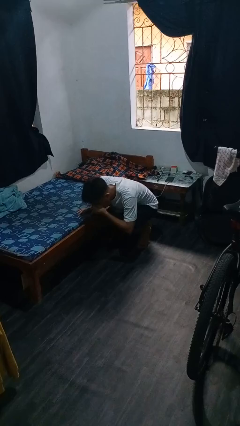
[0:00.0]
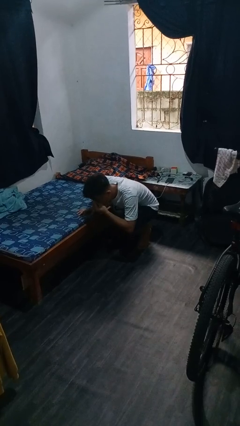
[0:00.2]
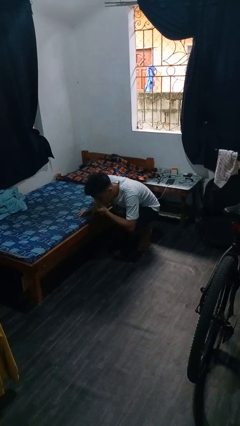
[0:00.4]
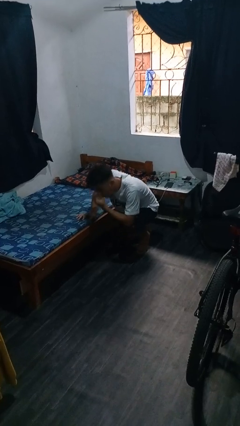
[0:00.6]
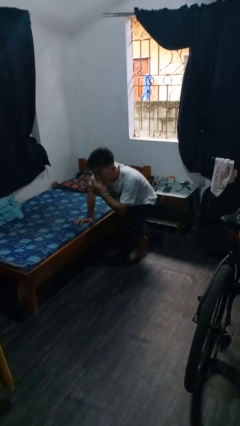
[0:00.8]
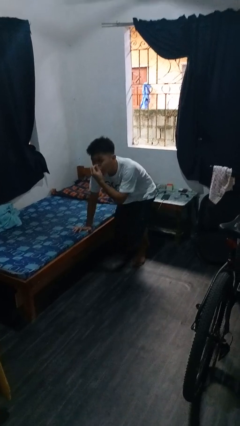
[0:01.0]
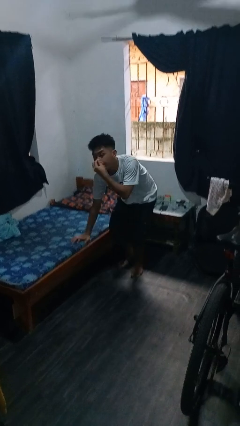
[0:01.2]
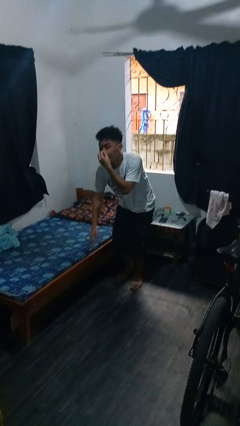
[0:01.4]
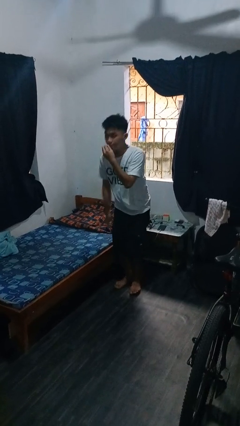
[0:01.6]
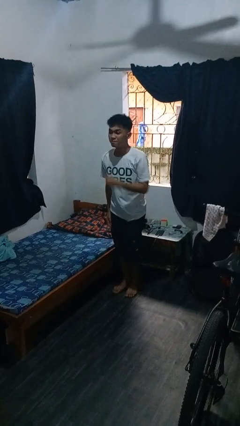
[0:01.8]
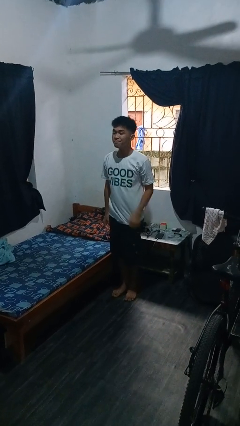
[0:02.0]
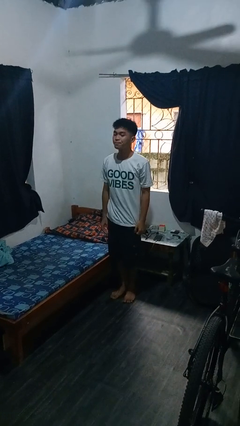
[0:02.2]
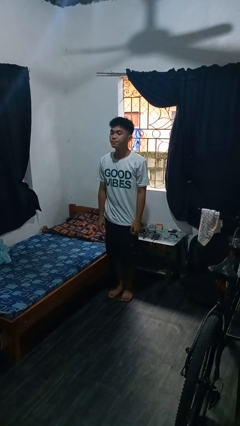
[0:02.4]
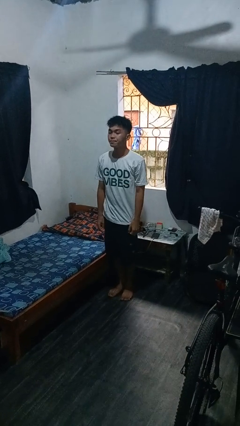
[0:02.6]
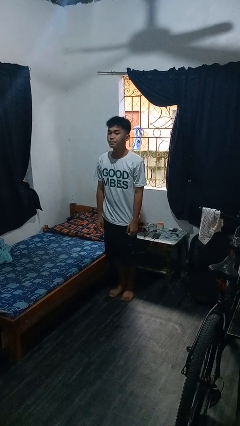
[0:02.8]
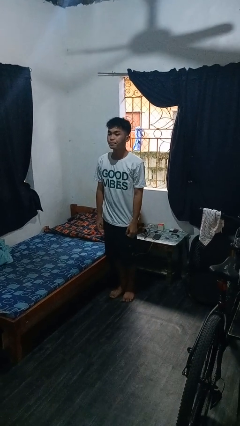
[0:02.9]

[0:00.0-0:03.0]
person stands up from floor

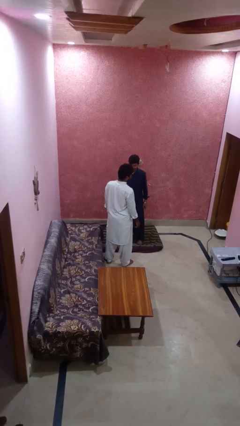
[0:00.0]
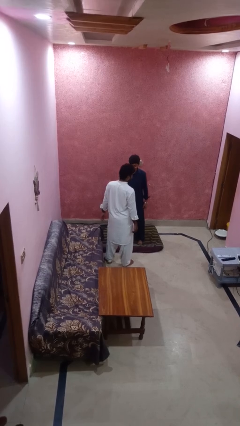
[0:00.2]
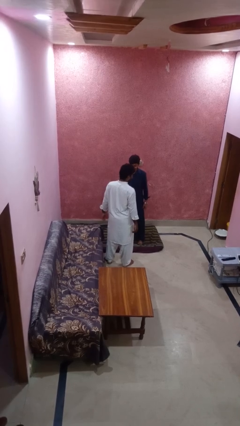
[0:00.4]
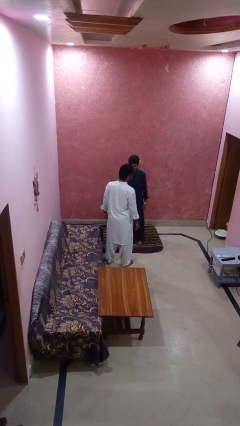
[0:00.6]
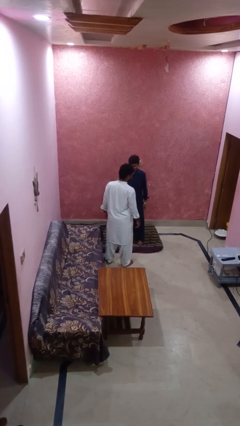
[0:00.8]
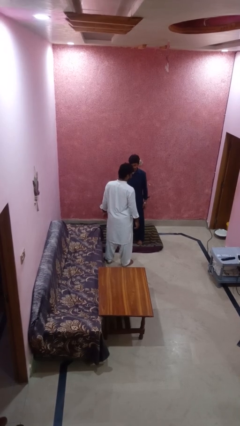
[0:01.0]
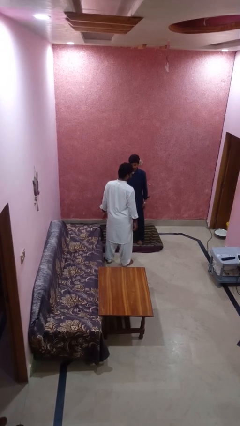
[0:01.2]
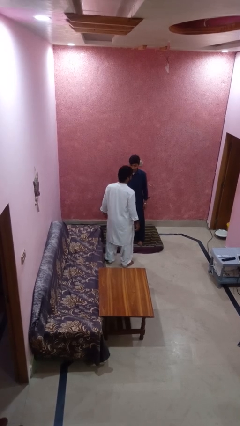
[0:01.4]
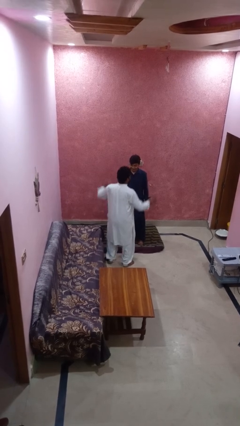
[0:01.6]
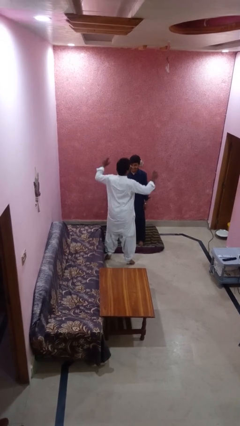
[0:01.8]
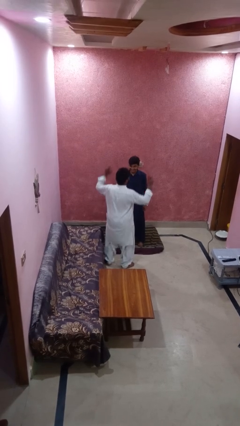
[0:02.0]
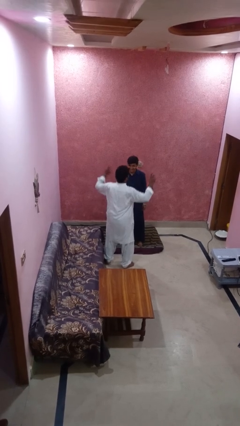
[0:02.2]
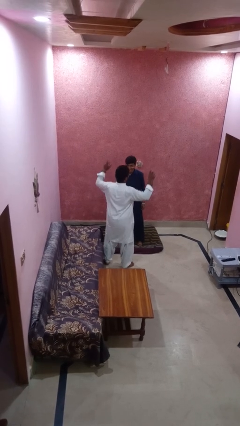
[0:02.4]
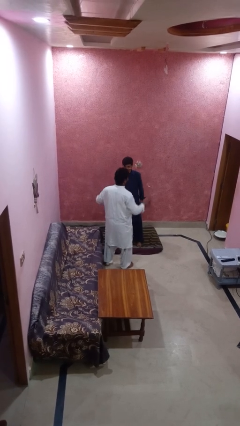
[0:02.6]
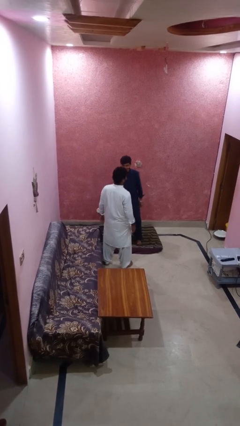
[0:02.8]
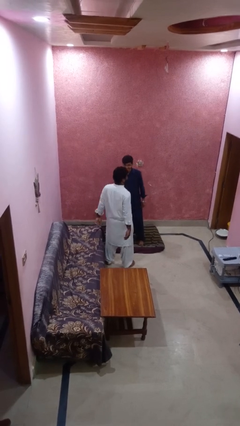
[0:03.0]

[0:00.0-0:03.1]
person laughs with person

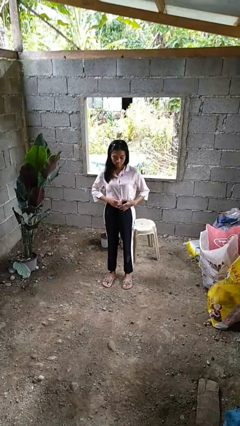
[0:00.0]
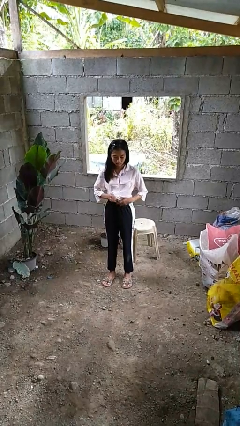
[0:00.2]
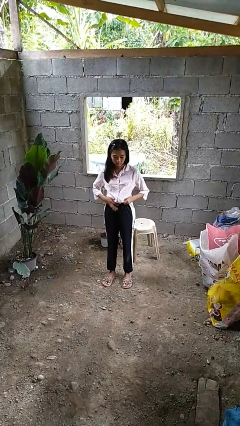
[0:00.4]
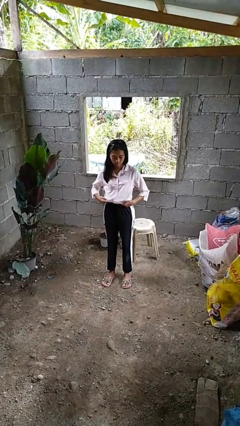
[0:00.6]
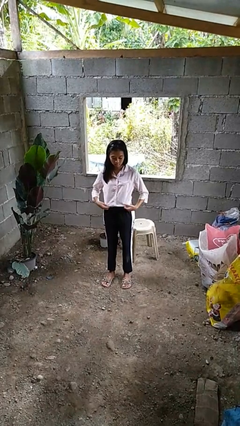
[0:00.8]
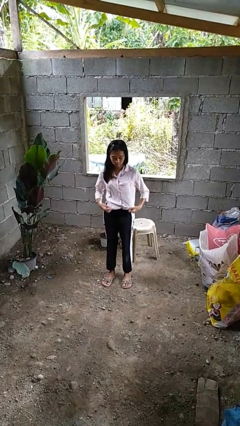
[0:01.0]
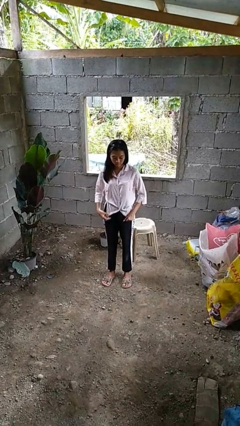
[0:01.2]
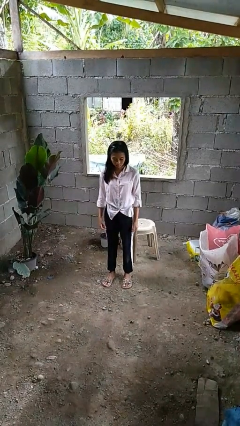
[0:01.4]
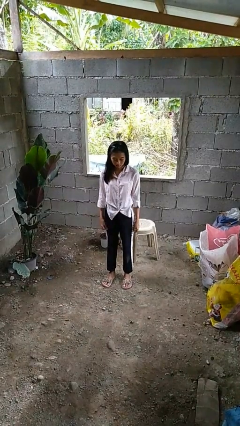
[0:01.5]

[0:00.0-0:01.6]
person untucks shirt

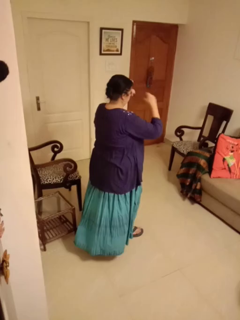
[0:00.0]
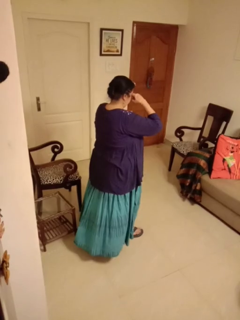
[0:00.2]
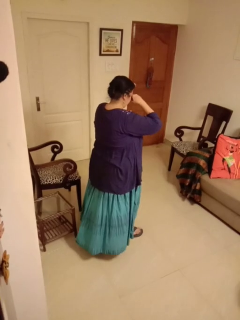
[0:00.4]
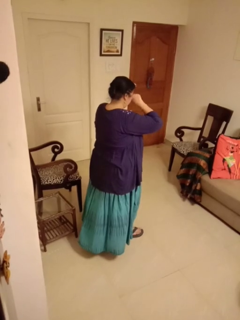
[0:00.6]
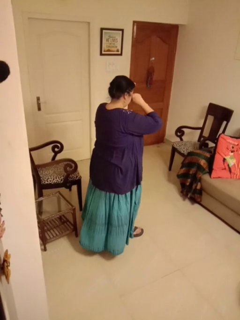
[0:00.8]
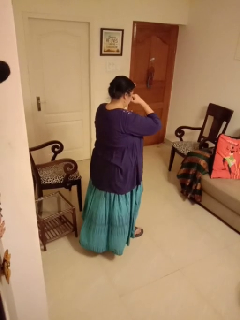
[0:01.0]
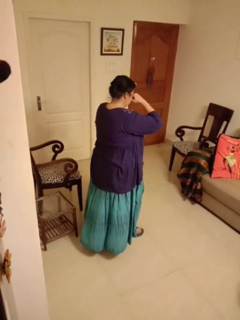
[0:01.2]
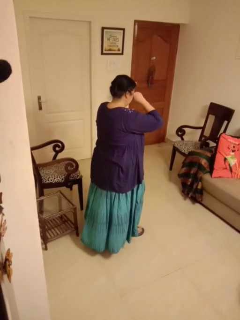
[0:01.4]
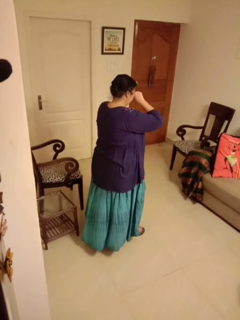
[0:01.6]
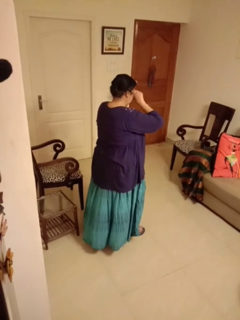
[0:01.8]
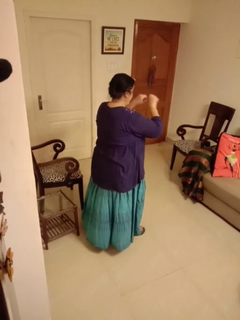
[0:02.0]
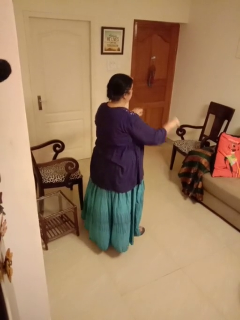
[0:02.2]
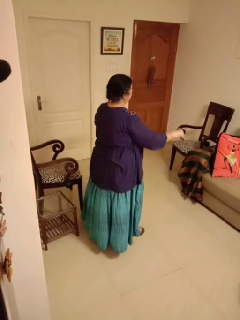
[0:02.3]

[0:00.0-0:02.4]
person rubs eyes

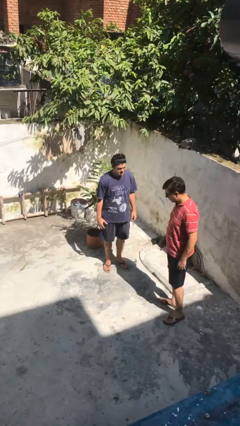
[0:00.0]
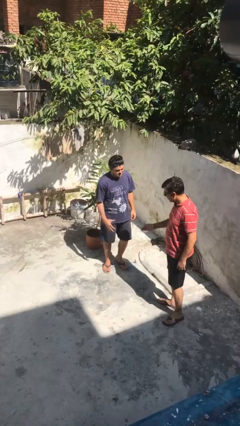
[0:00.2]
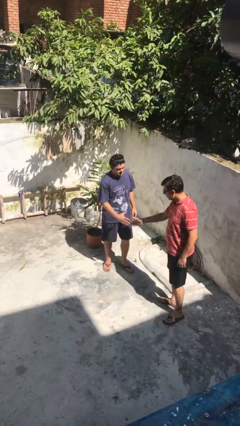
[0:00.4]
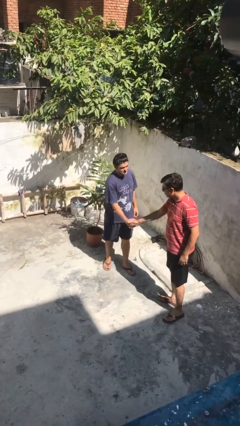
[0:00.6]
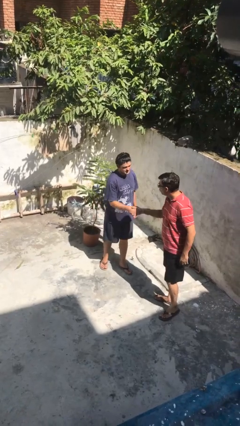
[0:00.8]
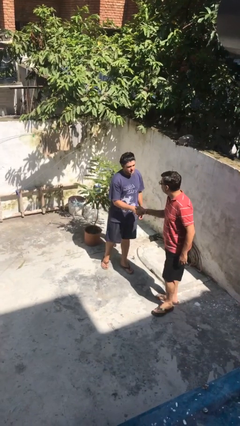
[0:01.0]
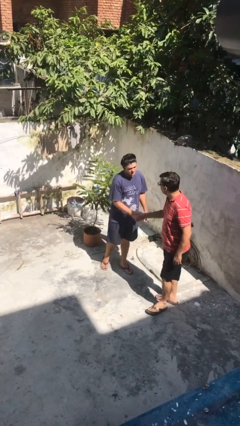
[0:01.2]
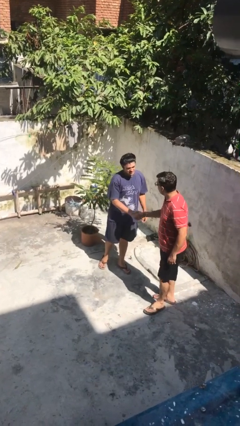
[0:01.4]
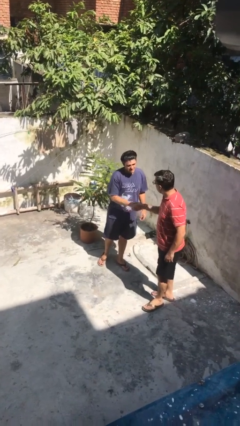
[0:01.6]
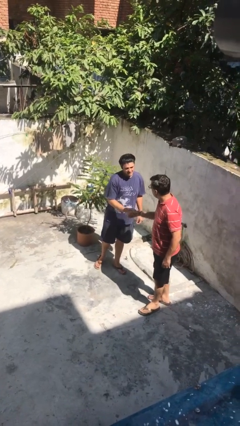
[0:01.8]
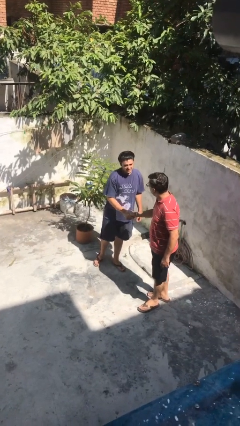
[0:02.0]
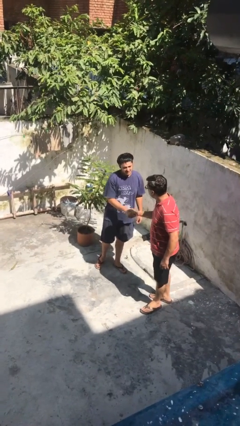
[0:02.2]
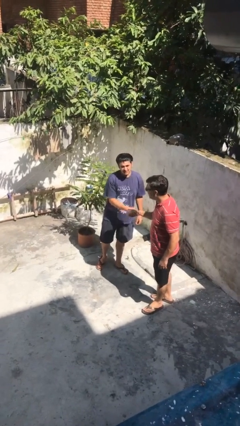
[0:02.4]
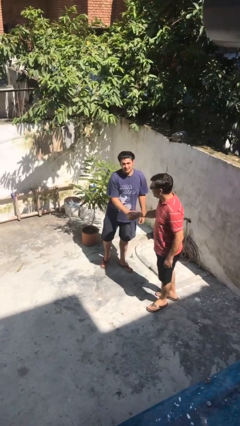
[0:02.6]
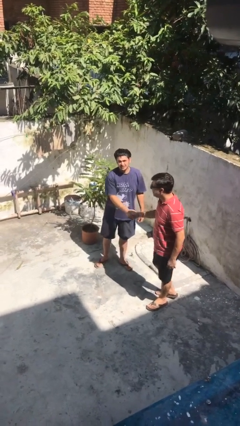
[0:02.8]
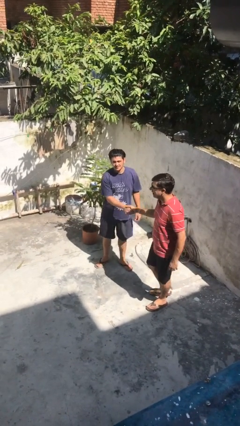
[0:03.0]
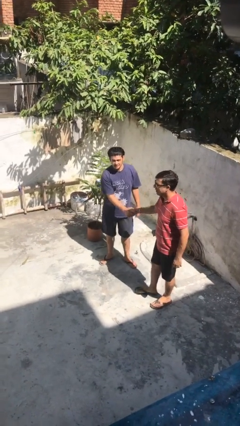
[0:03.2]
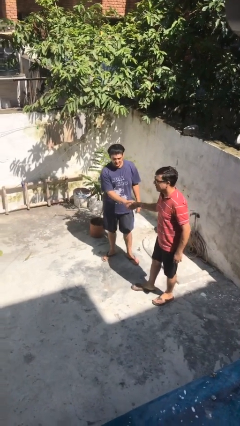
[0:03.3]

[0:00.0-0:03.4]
person shakes hand

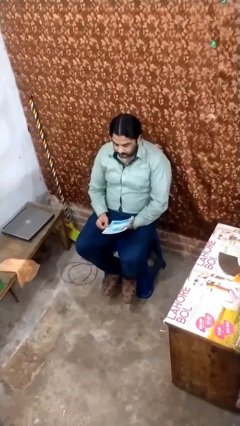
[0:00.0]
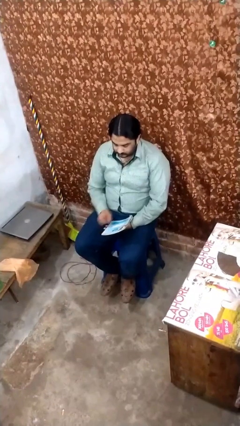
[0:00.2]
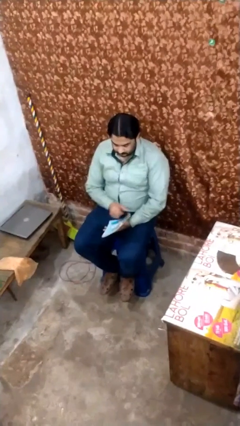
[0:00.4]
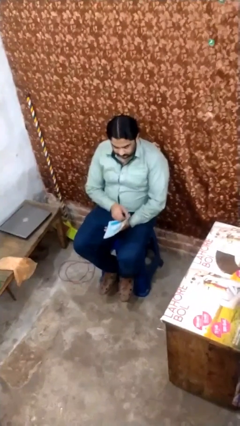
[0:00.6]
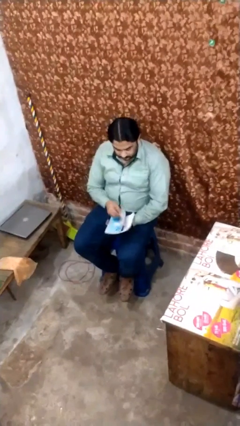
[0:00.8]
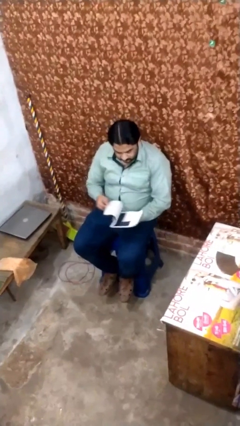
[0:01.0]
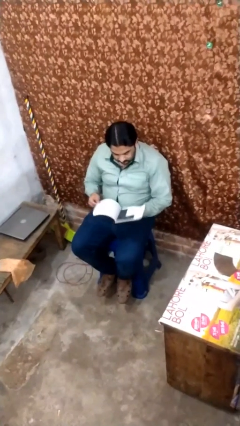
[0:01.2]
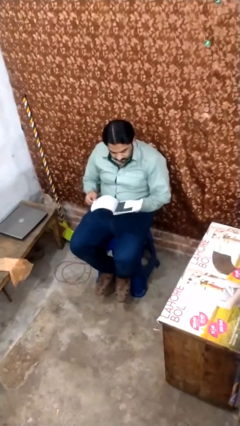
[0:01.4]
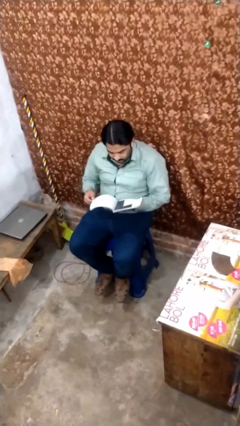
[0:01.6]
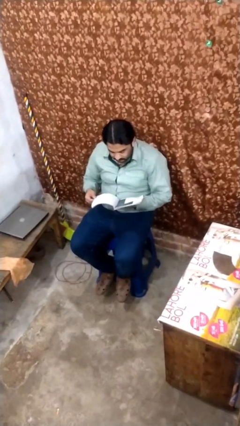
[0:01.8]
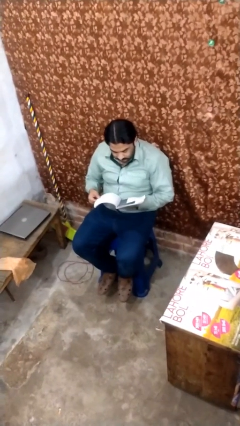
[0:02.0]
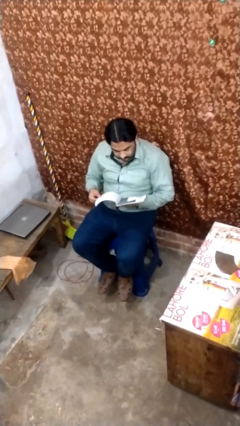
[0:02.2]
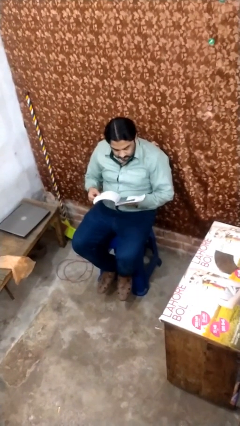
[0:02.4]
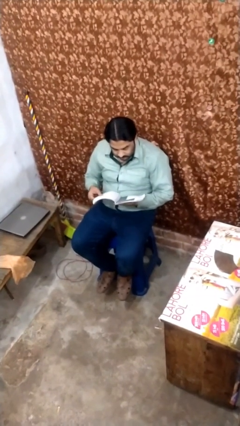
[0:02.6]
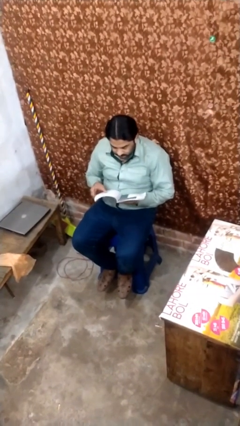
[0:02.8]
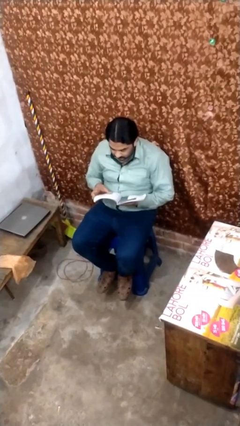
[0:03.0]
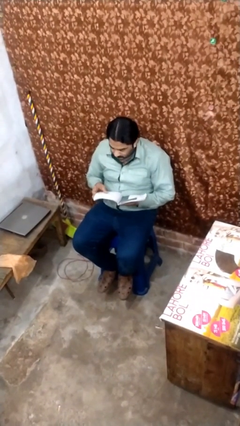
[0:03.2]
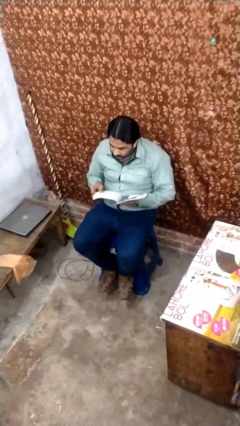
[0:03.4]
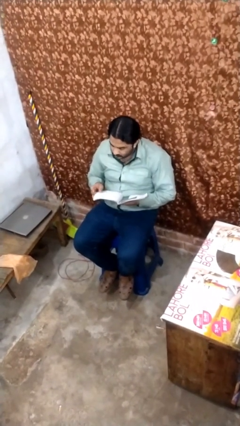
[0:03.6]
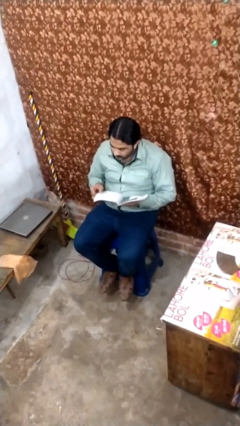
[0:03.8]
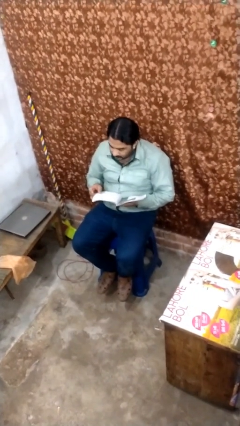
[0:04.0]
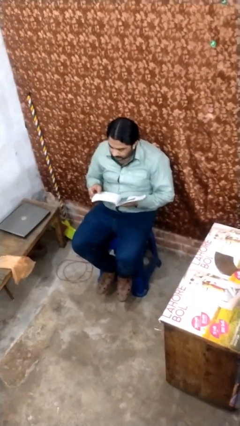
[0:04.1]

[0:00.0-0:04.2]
person reads document

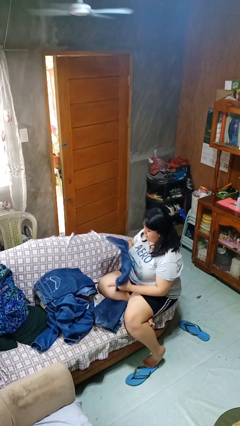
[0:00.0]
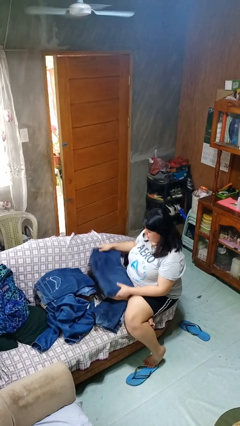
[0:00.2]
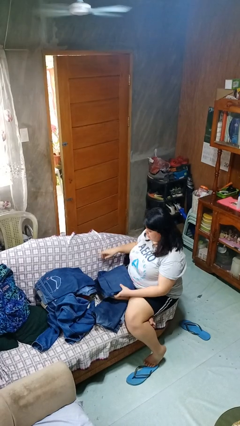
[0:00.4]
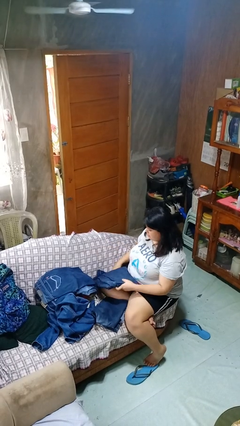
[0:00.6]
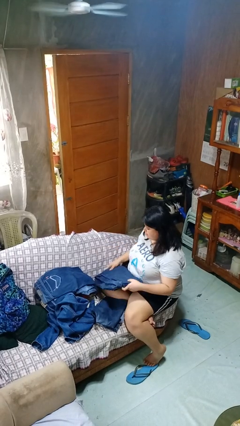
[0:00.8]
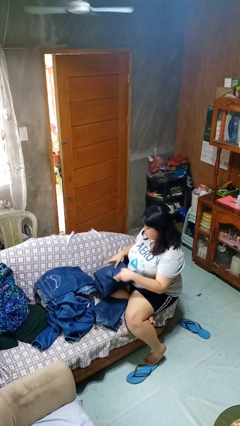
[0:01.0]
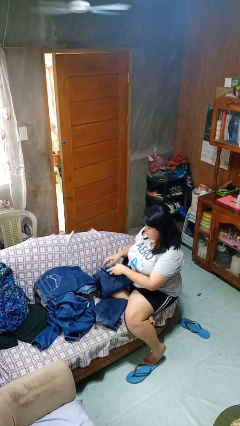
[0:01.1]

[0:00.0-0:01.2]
person folds pants
